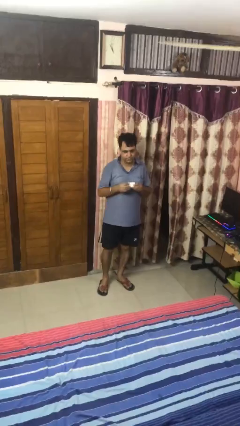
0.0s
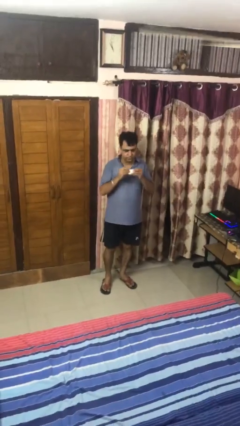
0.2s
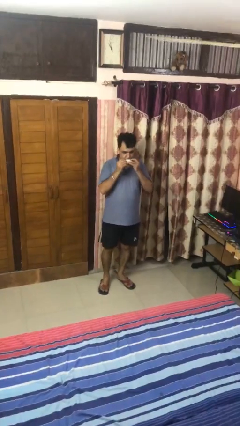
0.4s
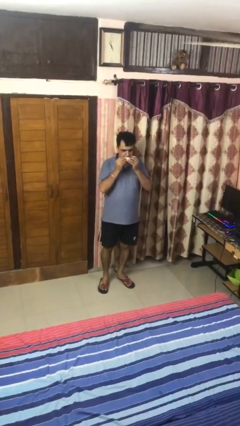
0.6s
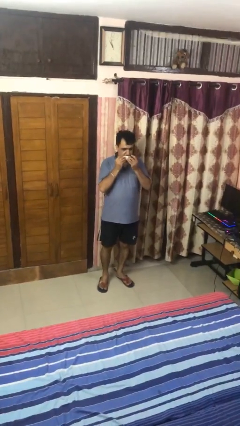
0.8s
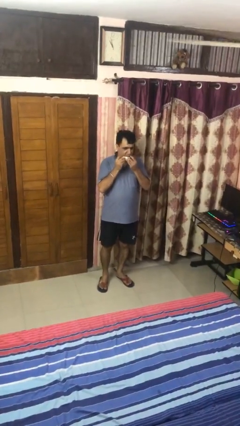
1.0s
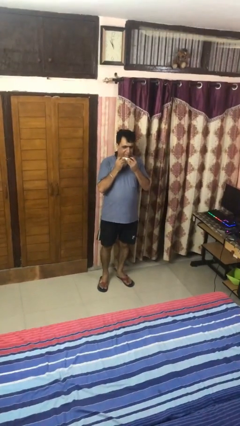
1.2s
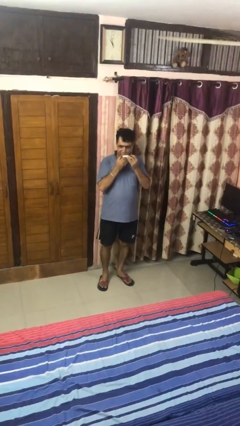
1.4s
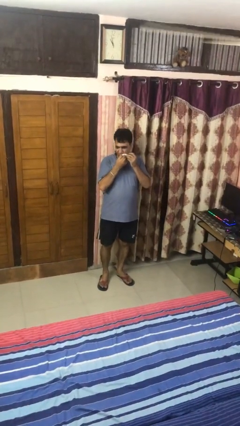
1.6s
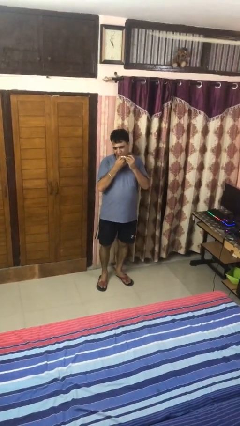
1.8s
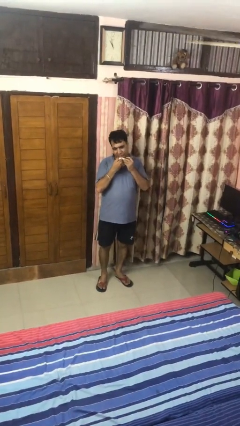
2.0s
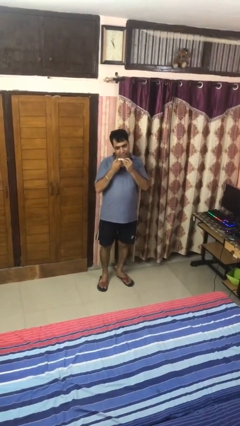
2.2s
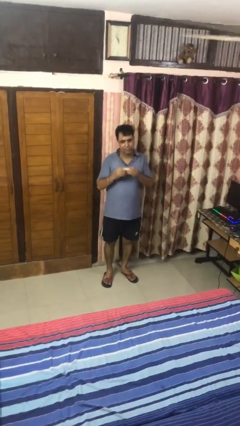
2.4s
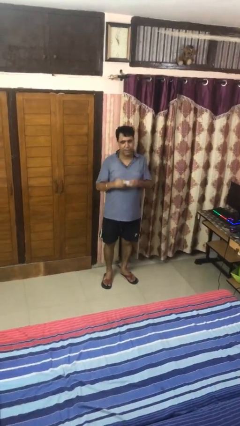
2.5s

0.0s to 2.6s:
person wipes mouth with napkin

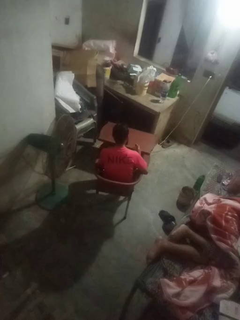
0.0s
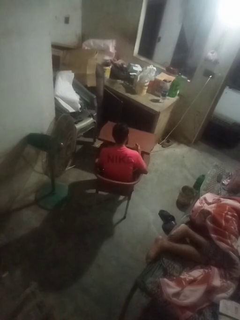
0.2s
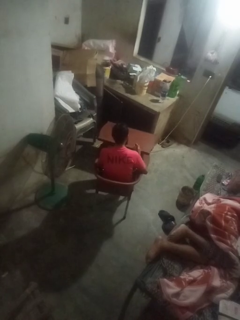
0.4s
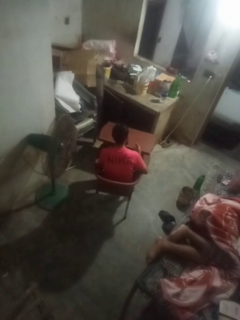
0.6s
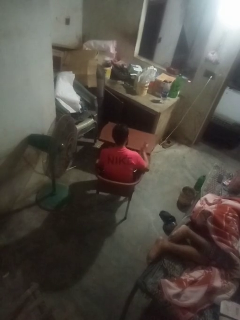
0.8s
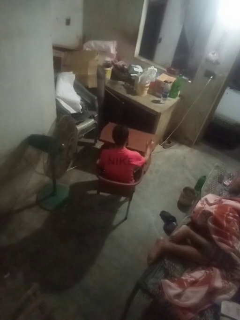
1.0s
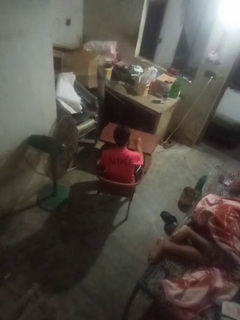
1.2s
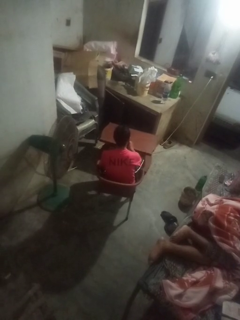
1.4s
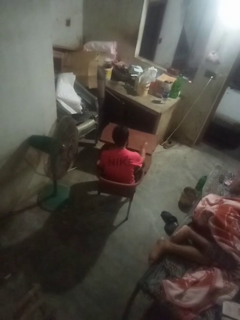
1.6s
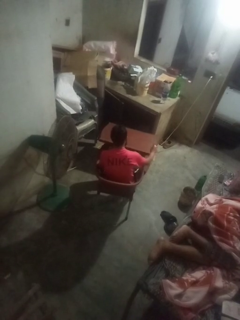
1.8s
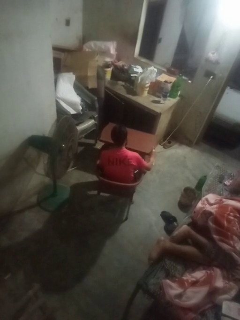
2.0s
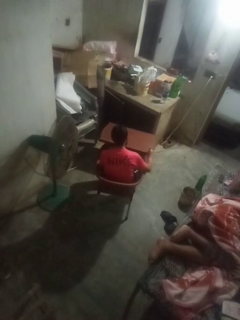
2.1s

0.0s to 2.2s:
person sprays from bottle

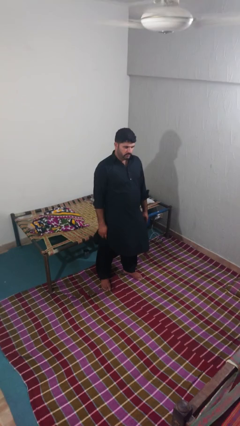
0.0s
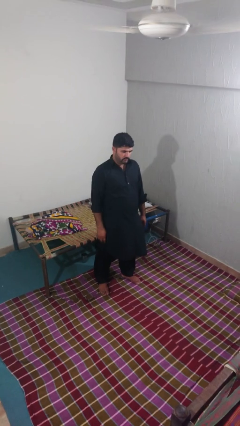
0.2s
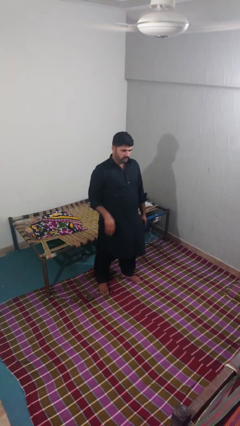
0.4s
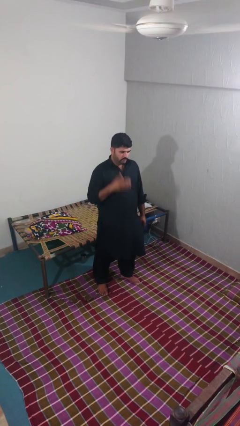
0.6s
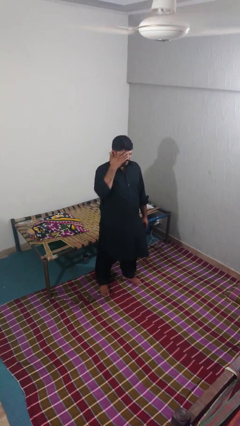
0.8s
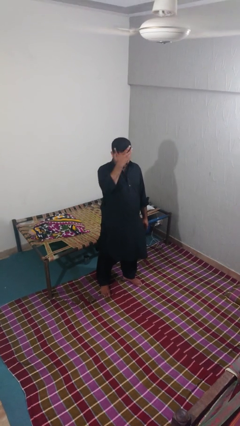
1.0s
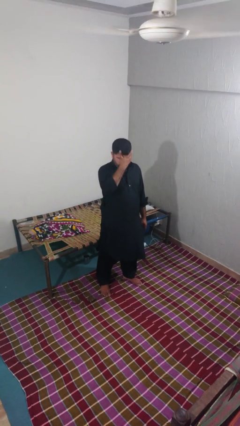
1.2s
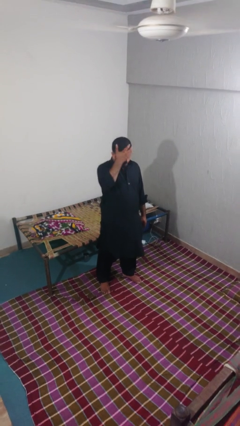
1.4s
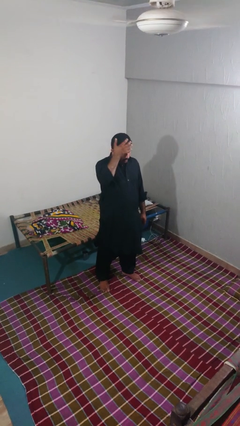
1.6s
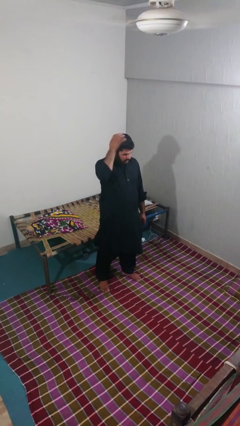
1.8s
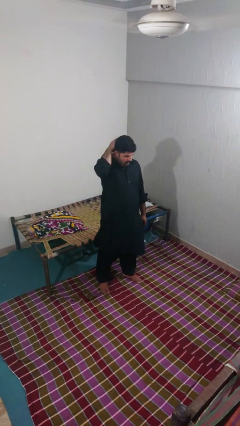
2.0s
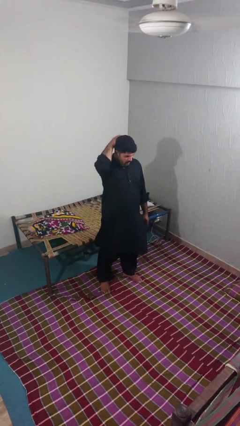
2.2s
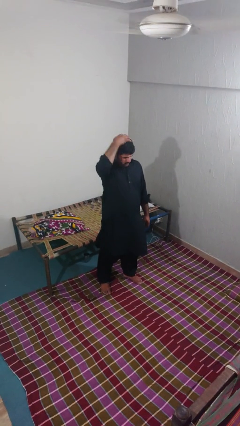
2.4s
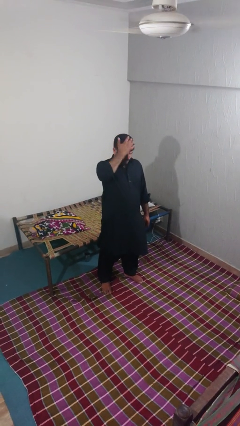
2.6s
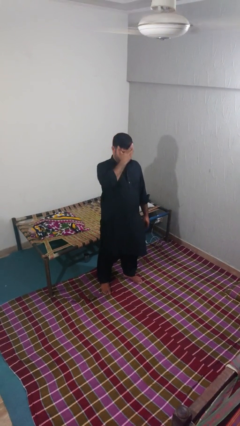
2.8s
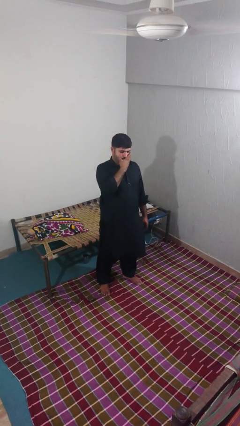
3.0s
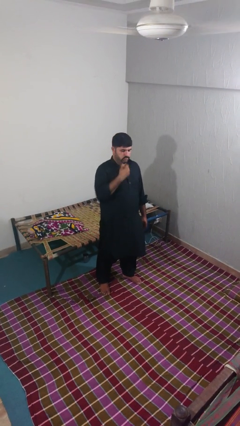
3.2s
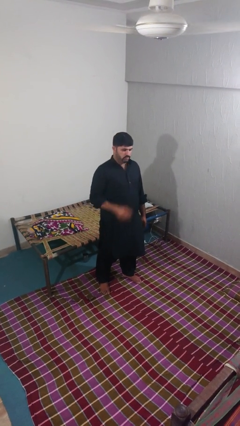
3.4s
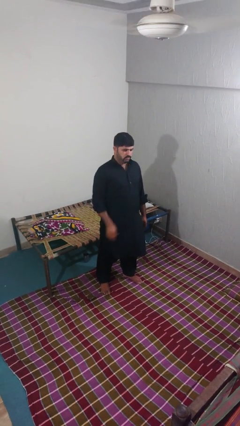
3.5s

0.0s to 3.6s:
person scratches face

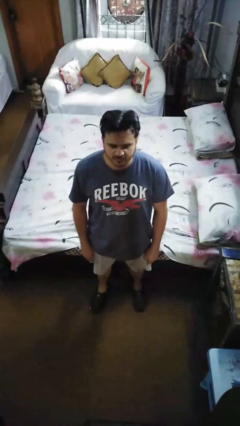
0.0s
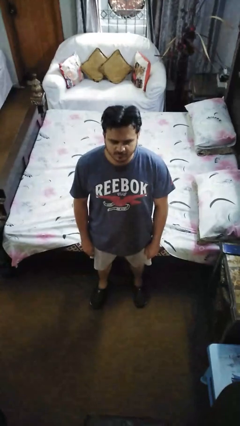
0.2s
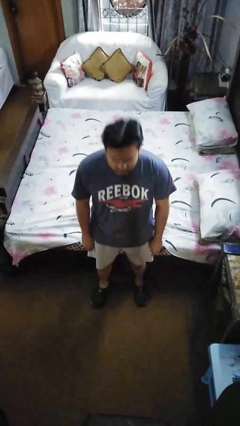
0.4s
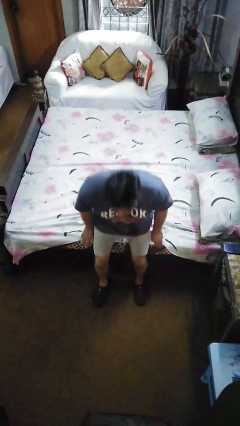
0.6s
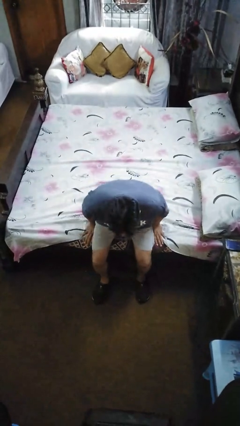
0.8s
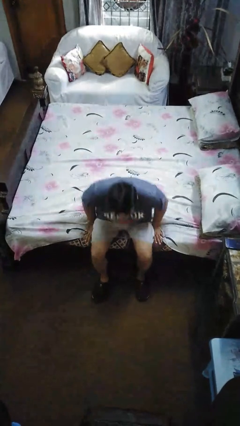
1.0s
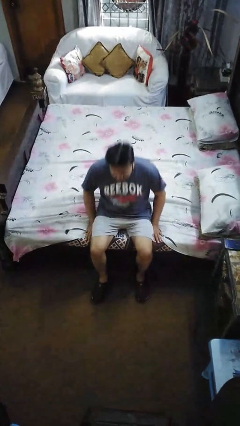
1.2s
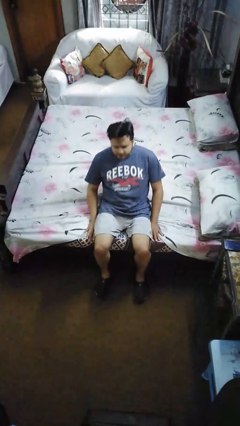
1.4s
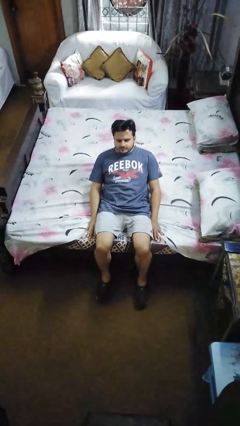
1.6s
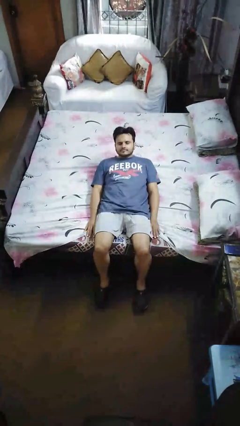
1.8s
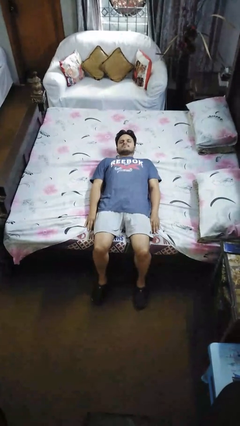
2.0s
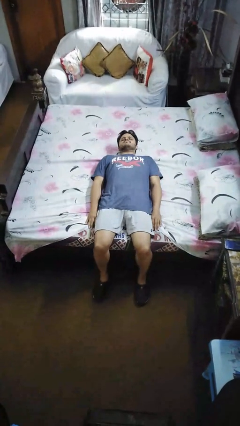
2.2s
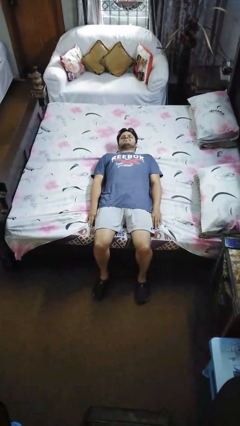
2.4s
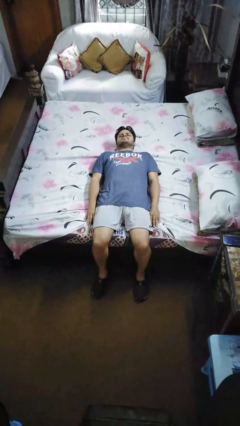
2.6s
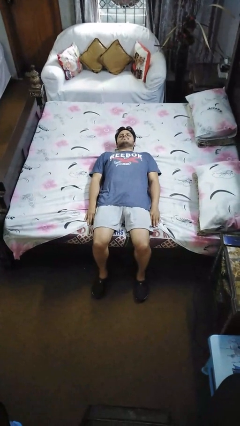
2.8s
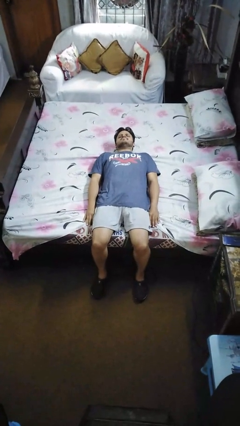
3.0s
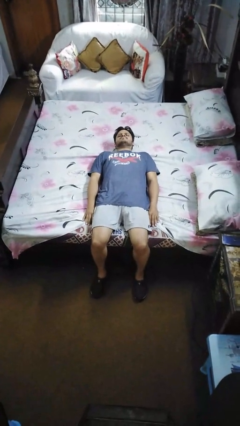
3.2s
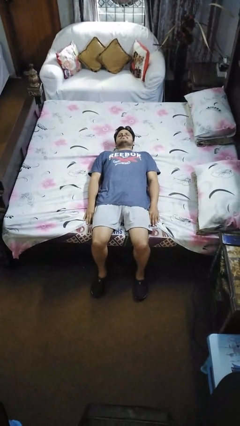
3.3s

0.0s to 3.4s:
person lies down on bed

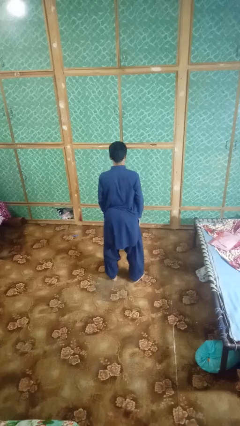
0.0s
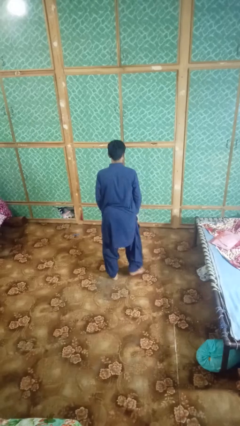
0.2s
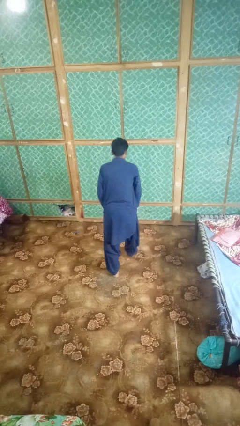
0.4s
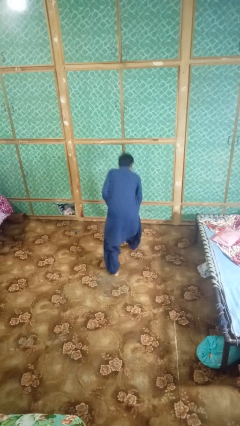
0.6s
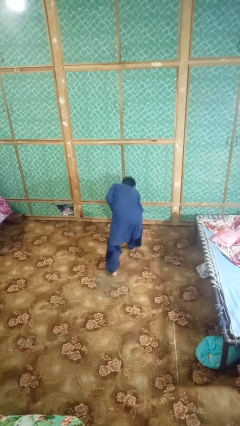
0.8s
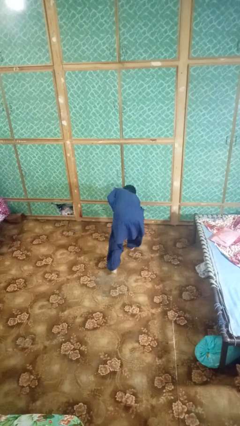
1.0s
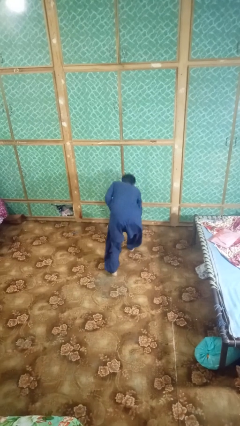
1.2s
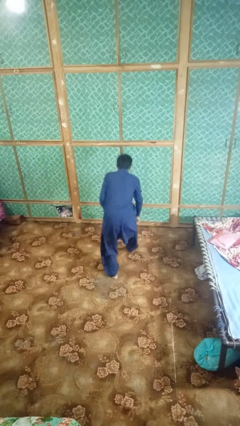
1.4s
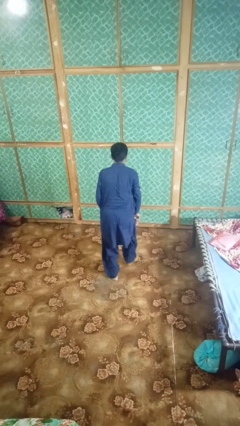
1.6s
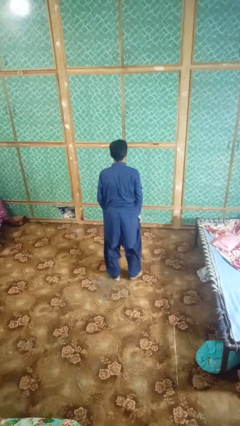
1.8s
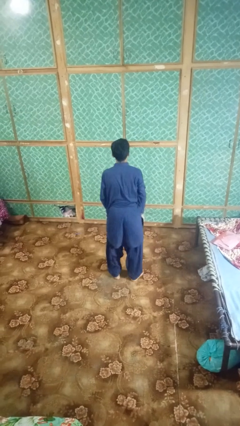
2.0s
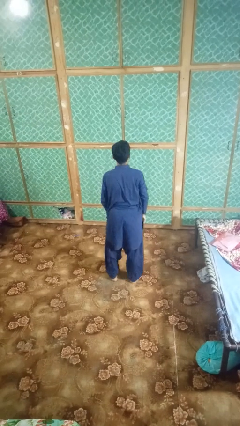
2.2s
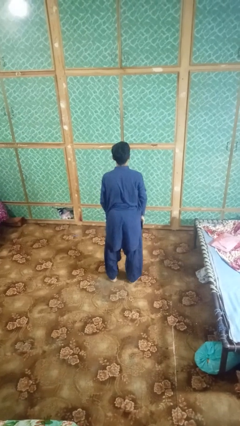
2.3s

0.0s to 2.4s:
person picks up object from floor

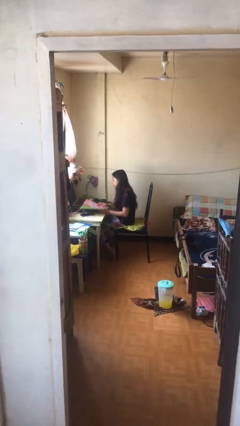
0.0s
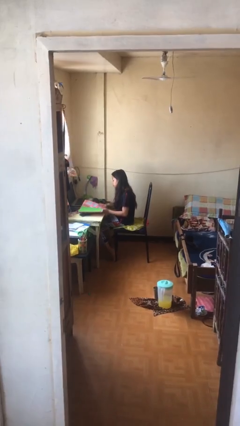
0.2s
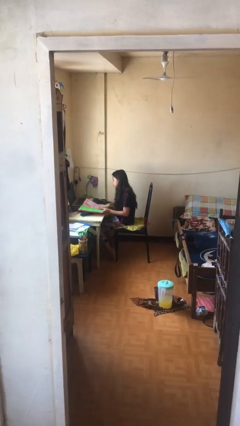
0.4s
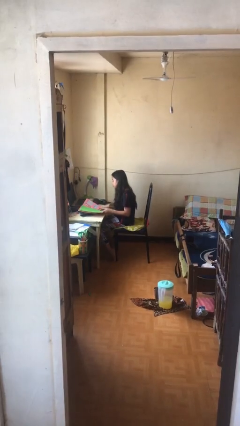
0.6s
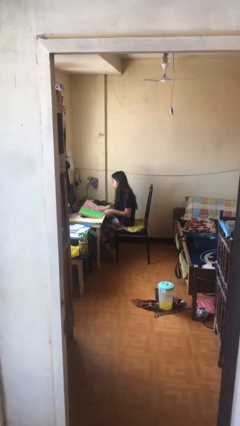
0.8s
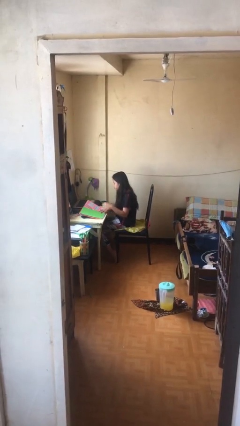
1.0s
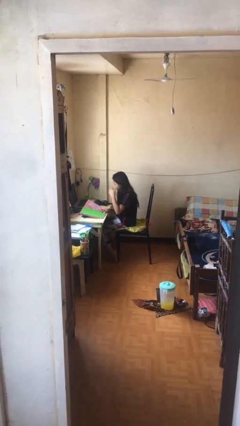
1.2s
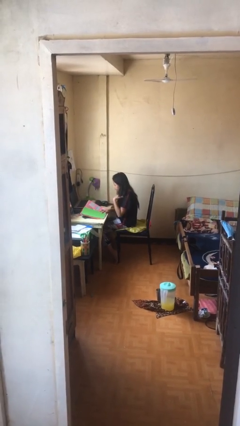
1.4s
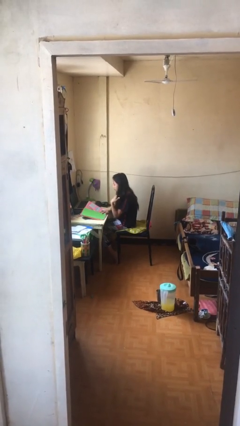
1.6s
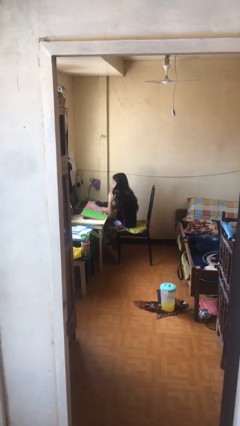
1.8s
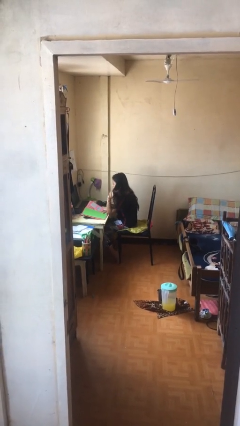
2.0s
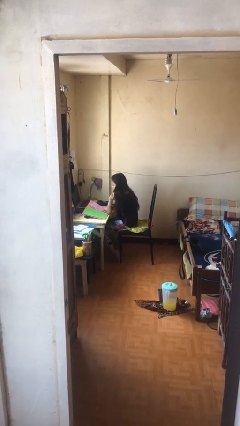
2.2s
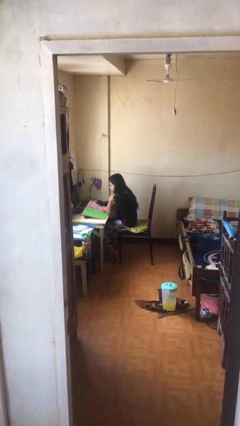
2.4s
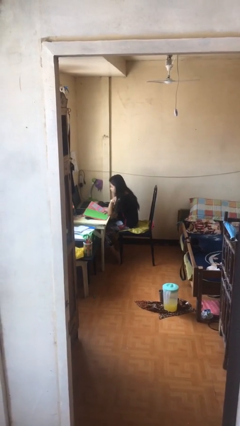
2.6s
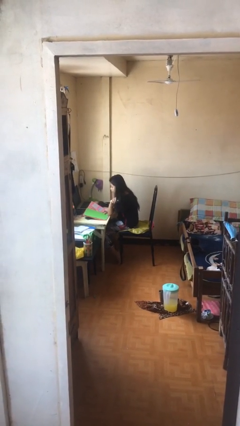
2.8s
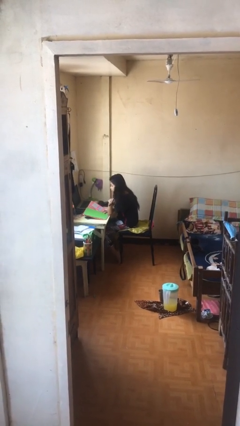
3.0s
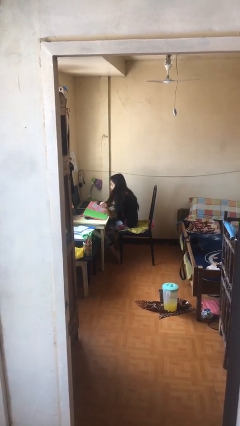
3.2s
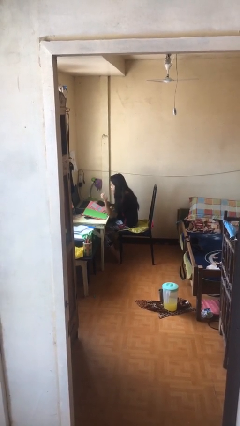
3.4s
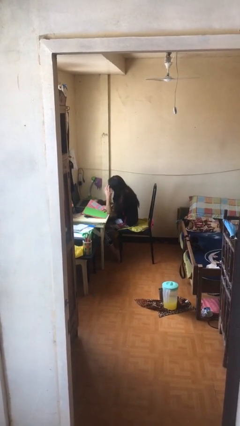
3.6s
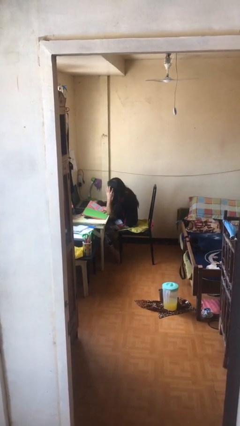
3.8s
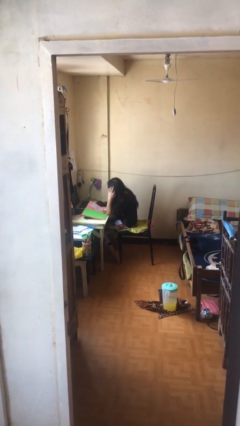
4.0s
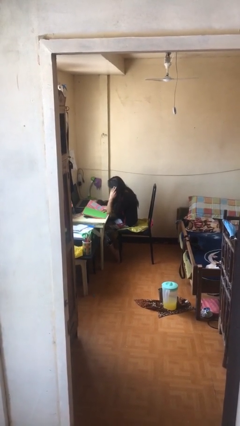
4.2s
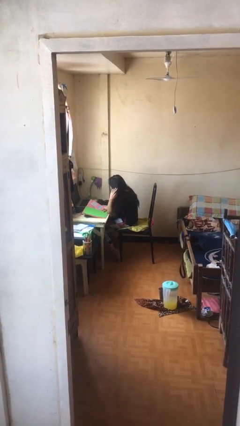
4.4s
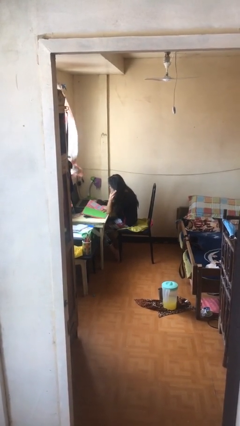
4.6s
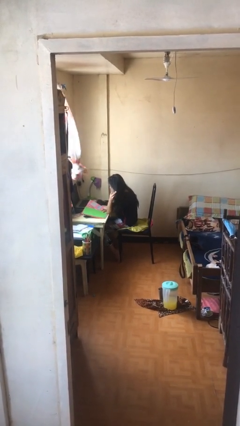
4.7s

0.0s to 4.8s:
person reads document
